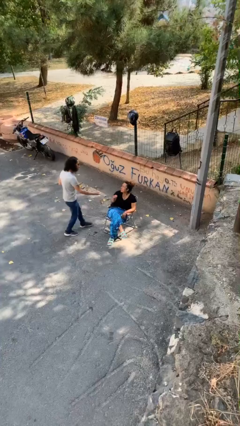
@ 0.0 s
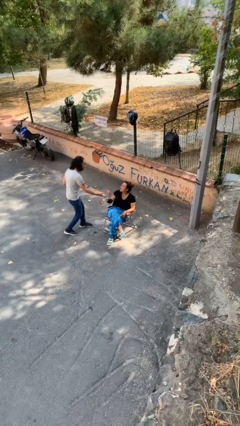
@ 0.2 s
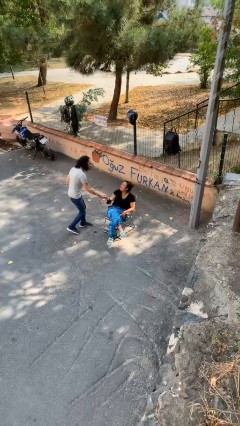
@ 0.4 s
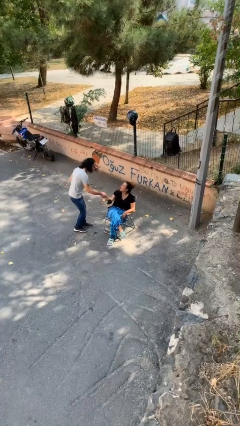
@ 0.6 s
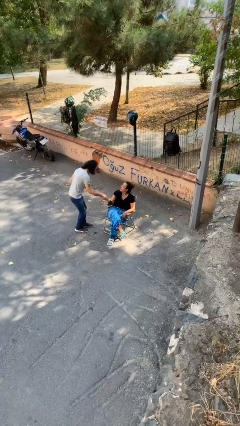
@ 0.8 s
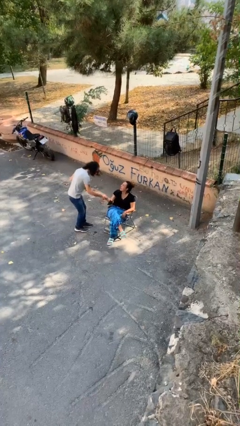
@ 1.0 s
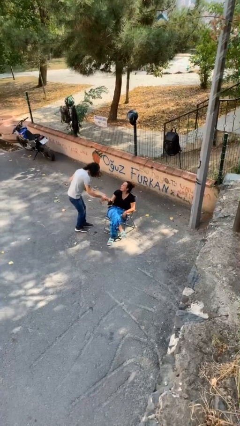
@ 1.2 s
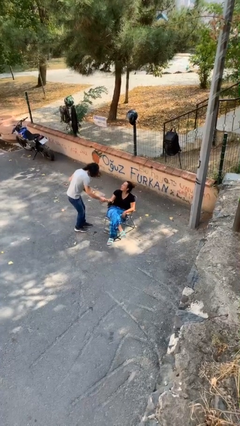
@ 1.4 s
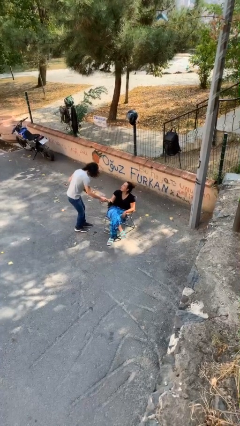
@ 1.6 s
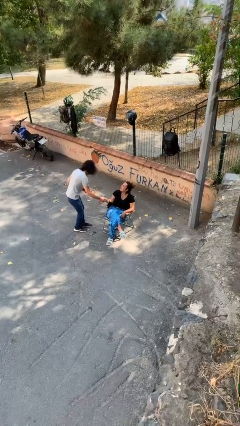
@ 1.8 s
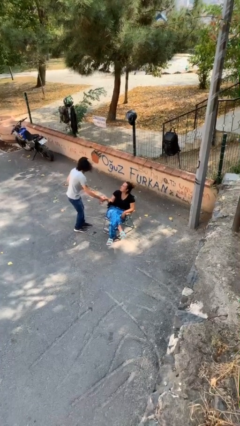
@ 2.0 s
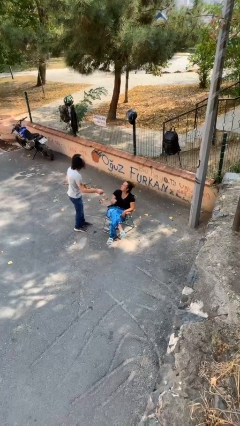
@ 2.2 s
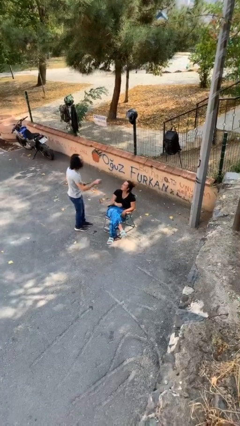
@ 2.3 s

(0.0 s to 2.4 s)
person shakes hand

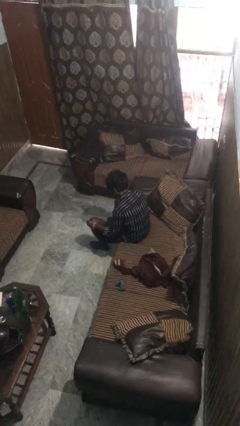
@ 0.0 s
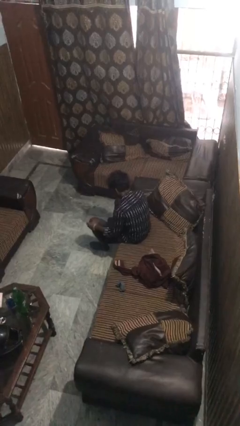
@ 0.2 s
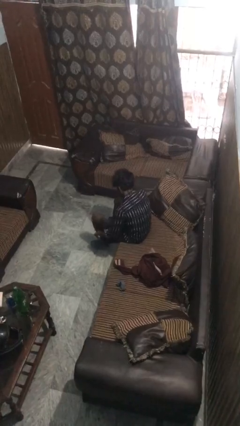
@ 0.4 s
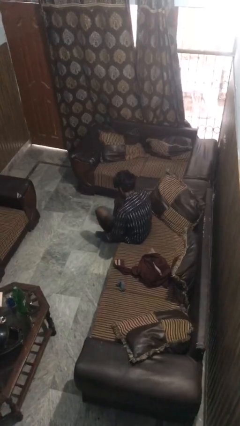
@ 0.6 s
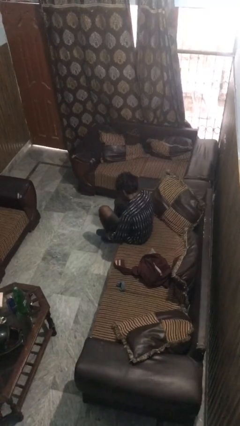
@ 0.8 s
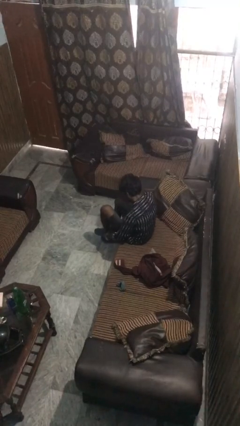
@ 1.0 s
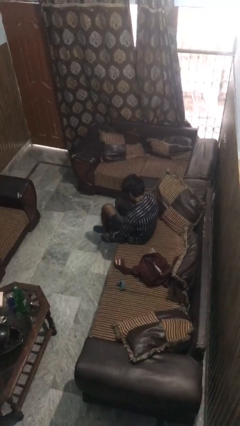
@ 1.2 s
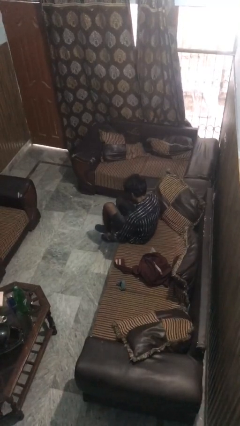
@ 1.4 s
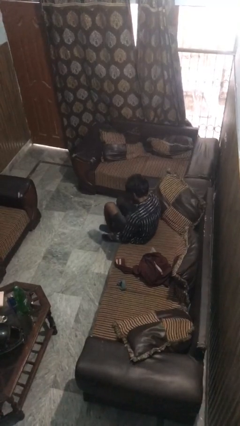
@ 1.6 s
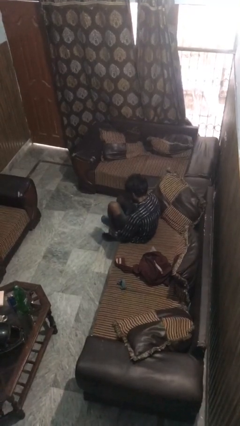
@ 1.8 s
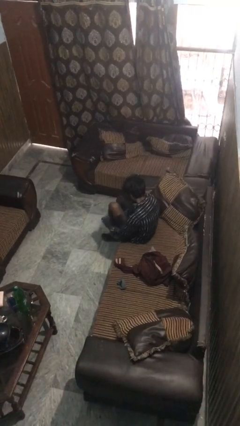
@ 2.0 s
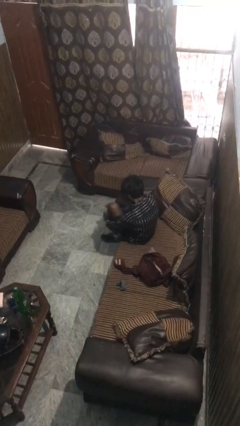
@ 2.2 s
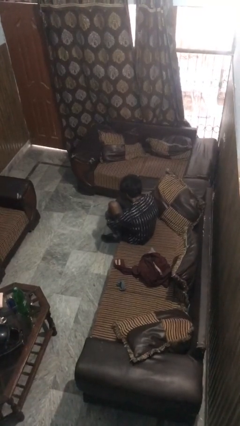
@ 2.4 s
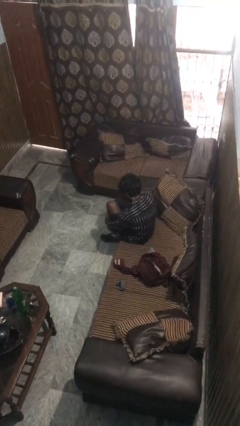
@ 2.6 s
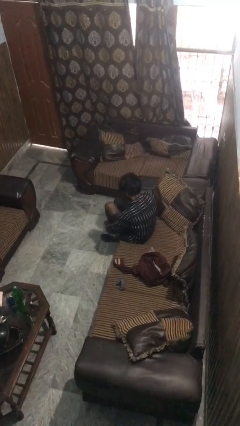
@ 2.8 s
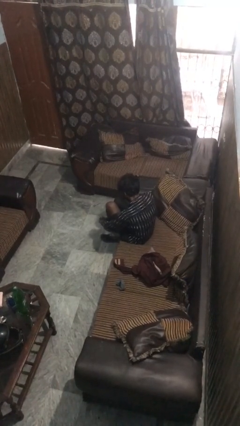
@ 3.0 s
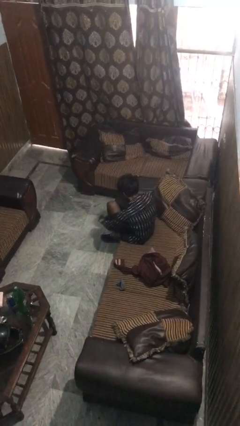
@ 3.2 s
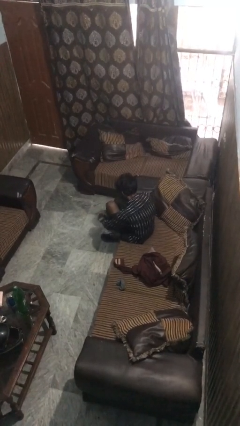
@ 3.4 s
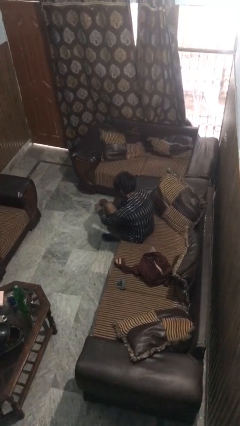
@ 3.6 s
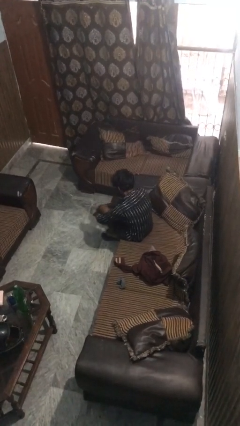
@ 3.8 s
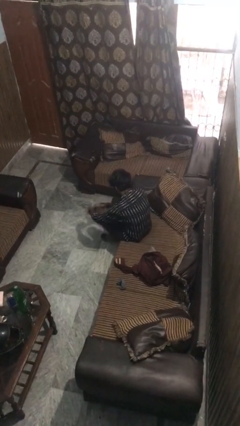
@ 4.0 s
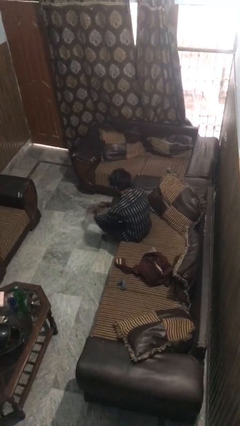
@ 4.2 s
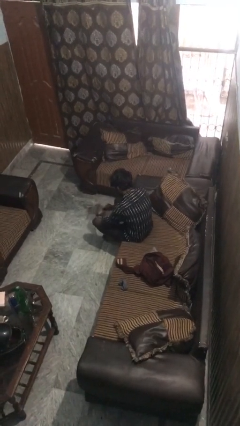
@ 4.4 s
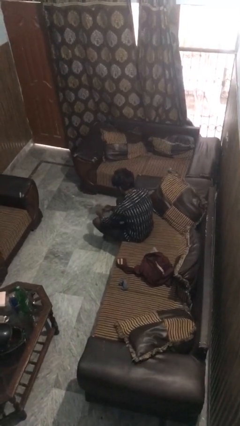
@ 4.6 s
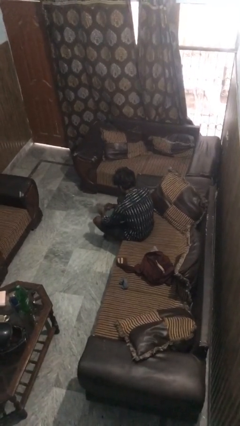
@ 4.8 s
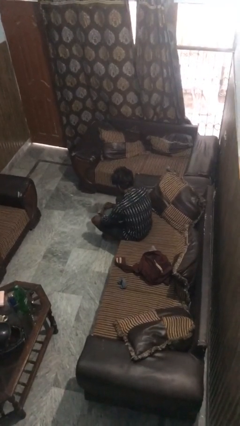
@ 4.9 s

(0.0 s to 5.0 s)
person takes off socks

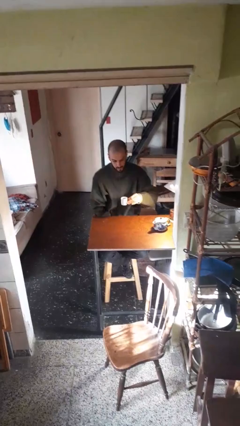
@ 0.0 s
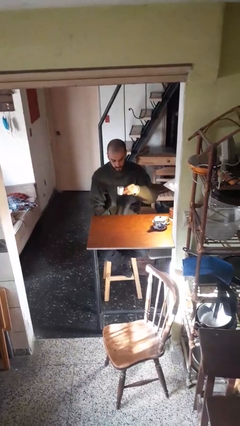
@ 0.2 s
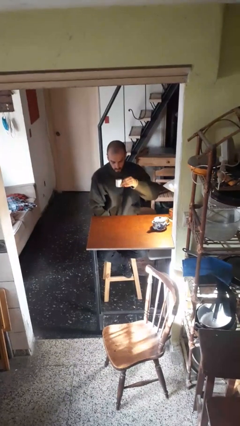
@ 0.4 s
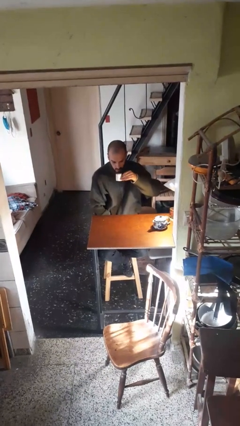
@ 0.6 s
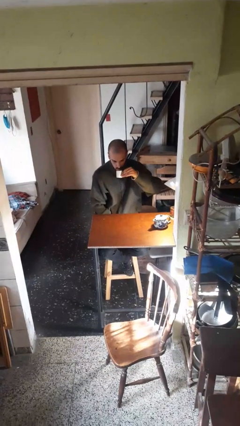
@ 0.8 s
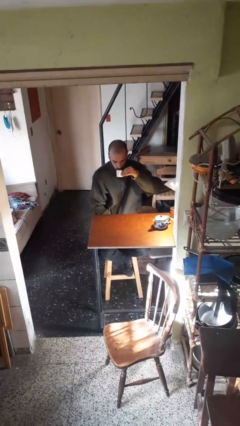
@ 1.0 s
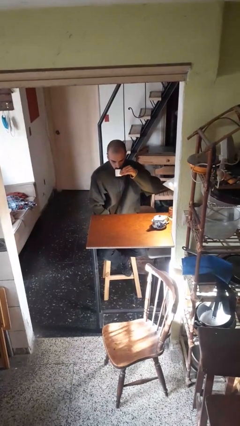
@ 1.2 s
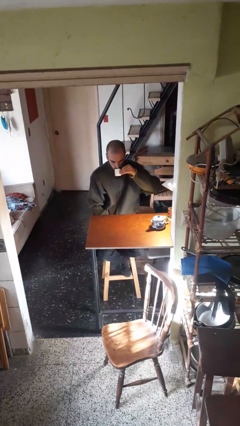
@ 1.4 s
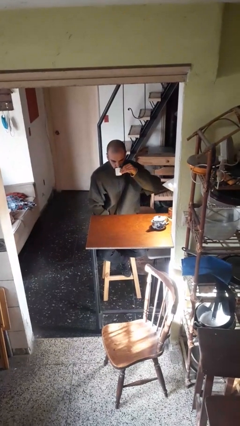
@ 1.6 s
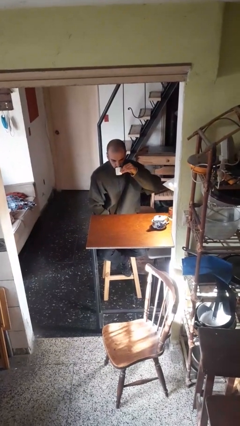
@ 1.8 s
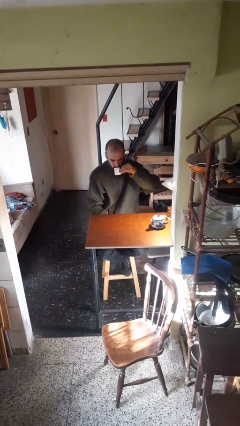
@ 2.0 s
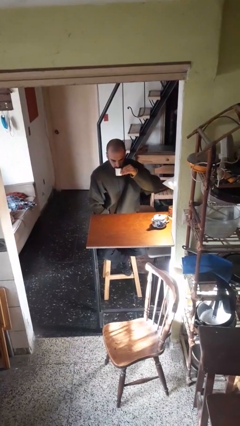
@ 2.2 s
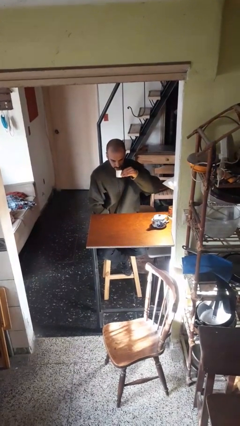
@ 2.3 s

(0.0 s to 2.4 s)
person drinks from mug

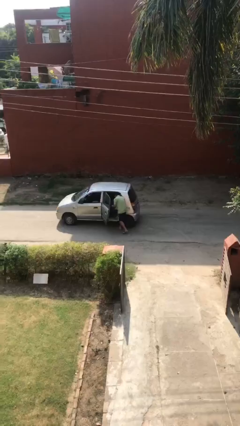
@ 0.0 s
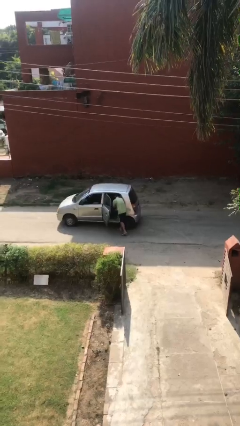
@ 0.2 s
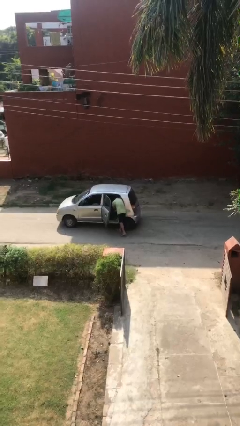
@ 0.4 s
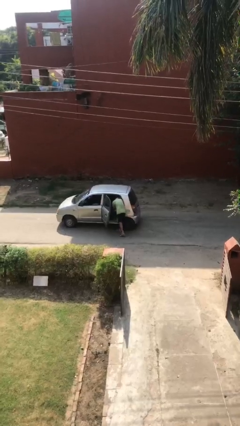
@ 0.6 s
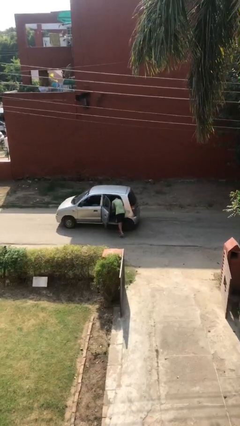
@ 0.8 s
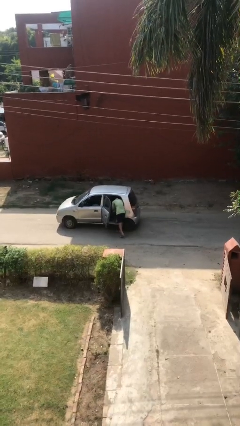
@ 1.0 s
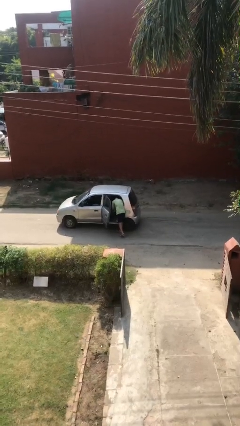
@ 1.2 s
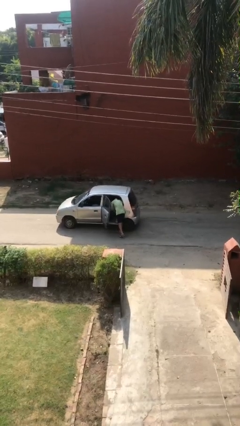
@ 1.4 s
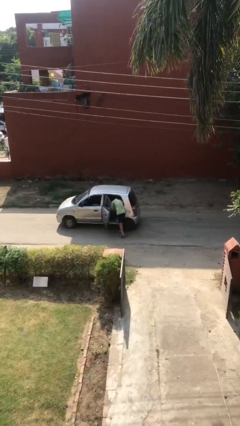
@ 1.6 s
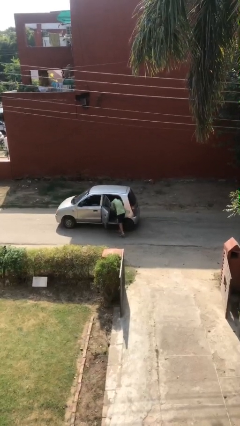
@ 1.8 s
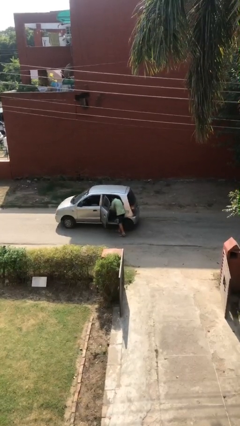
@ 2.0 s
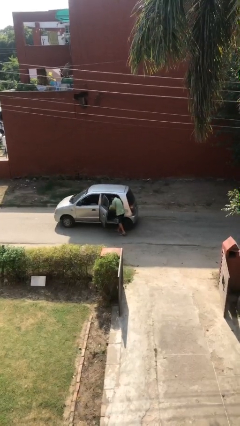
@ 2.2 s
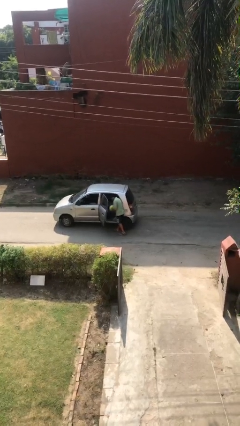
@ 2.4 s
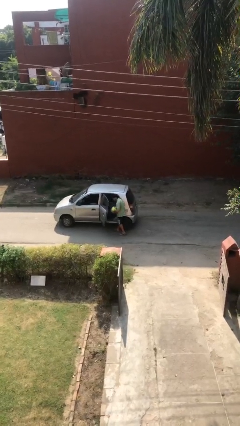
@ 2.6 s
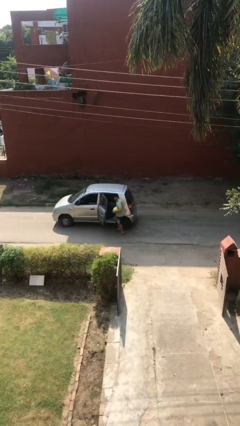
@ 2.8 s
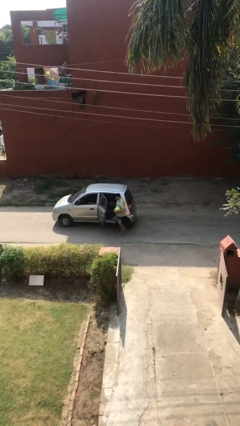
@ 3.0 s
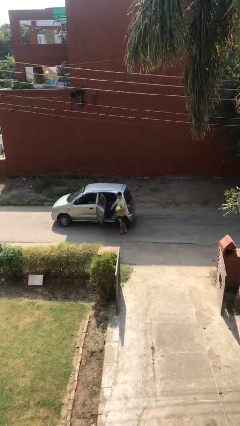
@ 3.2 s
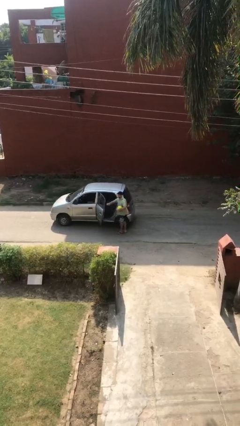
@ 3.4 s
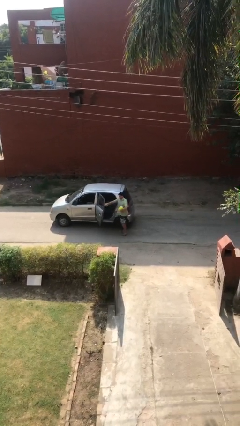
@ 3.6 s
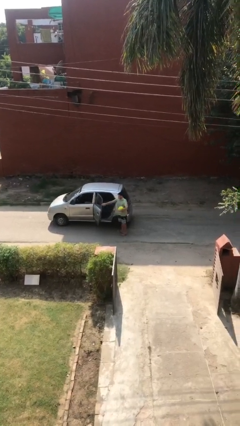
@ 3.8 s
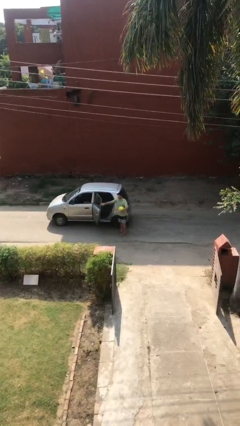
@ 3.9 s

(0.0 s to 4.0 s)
person unloads car

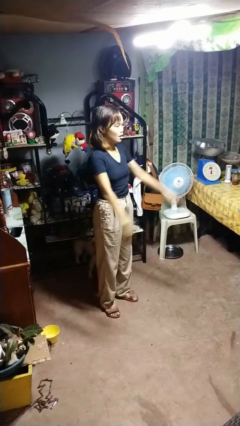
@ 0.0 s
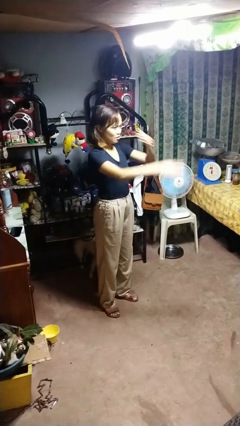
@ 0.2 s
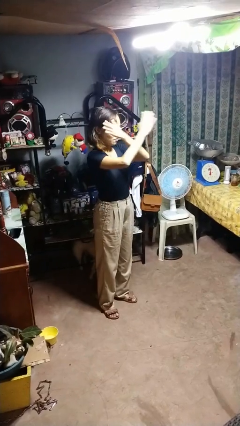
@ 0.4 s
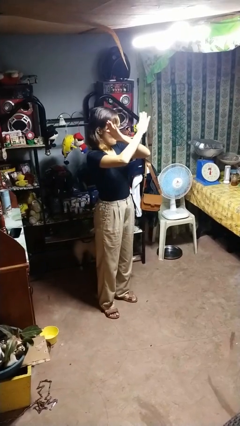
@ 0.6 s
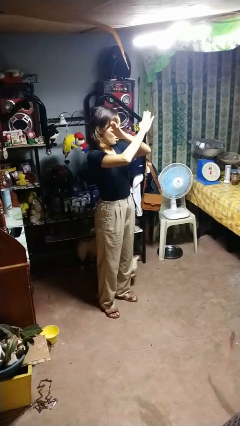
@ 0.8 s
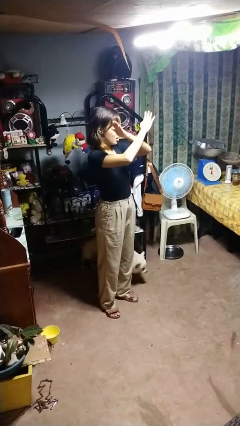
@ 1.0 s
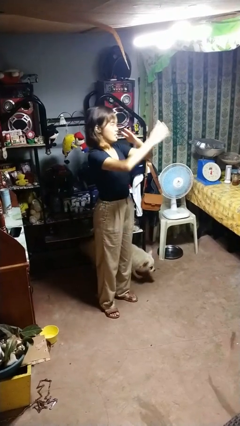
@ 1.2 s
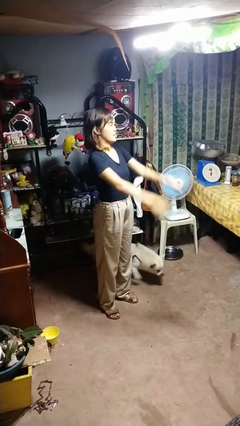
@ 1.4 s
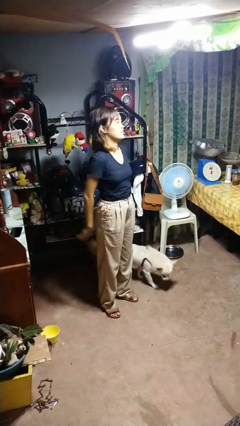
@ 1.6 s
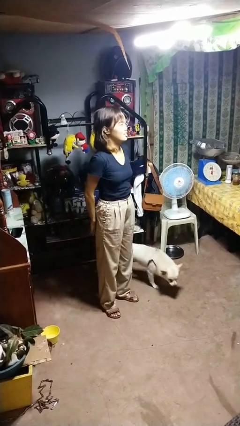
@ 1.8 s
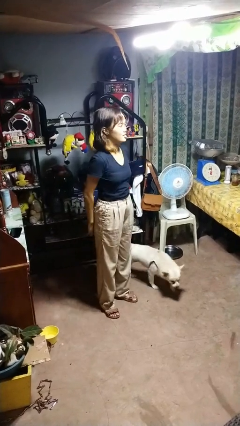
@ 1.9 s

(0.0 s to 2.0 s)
person gestures arms x

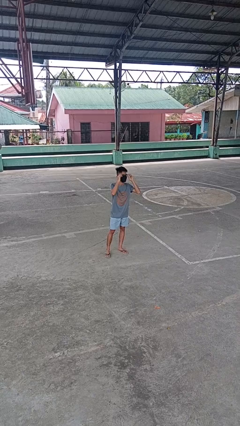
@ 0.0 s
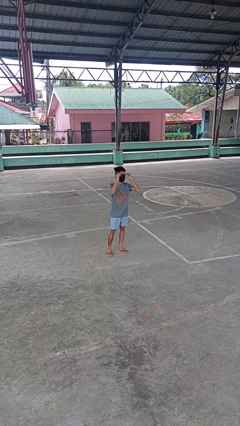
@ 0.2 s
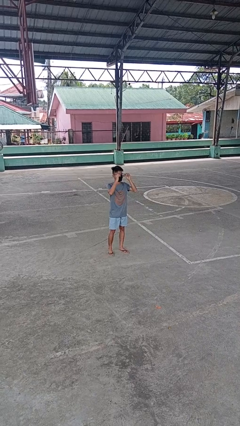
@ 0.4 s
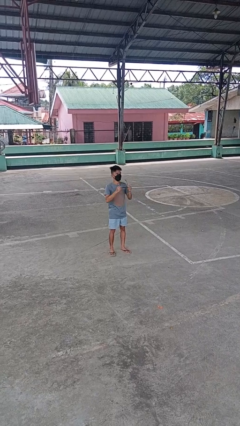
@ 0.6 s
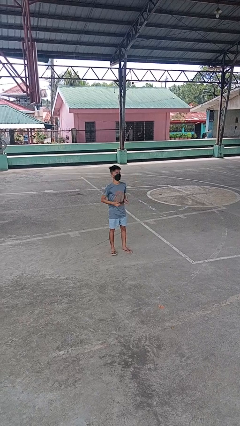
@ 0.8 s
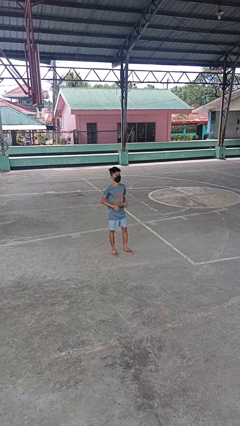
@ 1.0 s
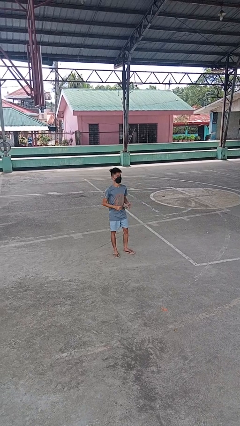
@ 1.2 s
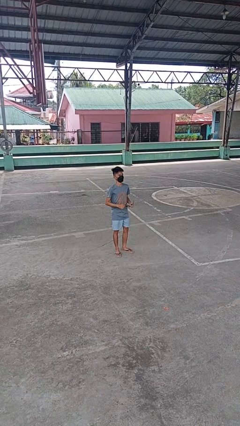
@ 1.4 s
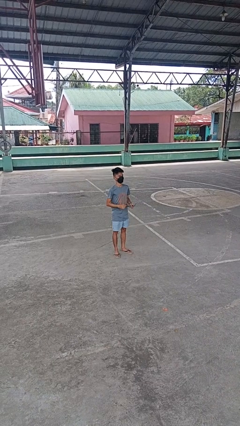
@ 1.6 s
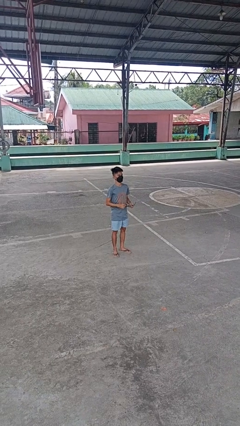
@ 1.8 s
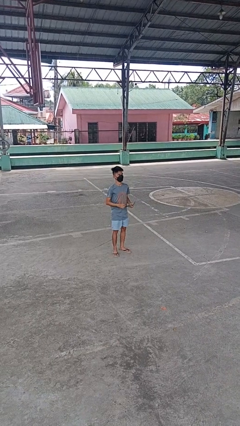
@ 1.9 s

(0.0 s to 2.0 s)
person takes off glasses
